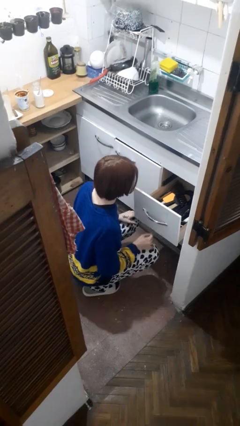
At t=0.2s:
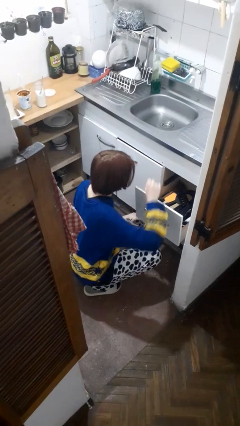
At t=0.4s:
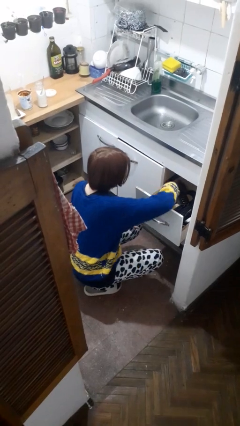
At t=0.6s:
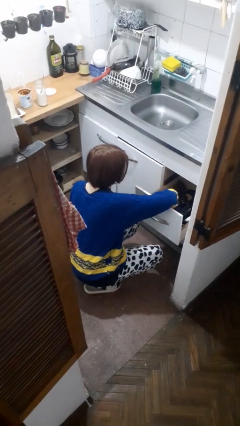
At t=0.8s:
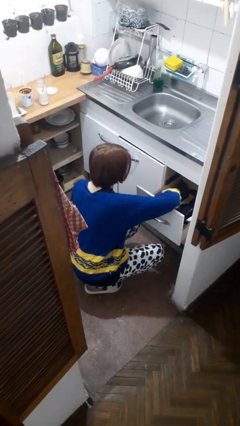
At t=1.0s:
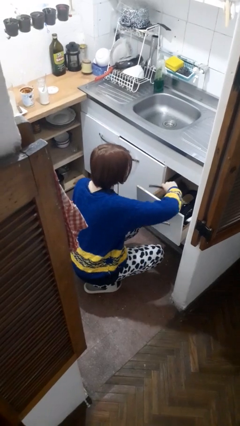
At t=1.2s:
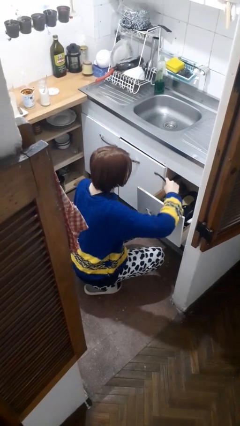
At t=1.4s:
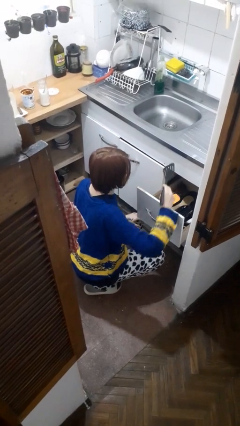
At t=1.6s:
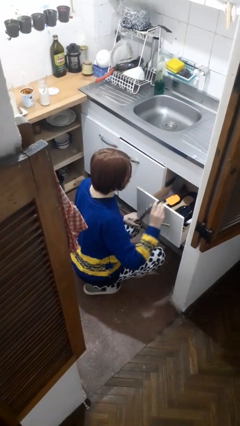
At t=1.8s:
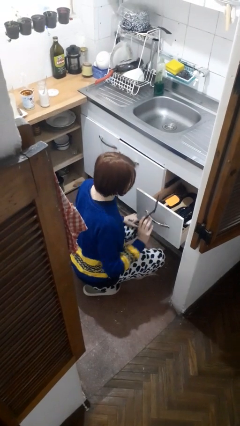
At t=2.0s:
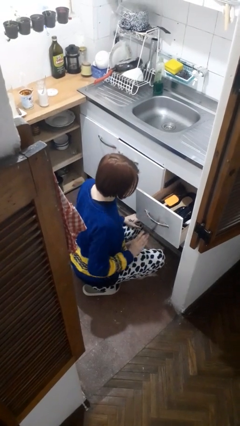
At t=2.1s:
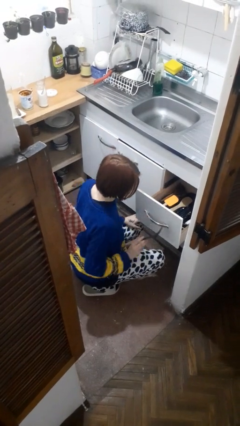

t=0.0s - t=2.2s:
person takes object from kitchen drawer

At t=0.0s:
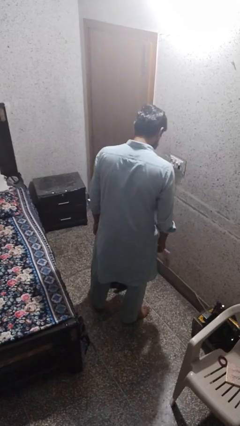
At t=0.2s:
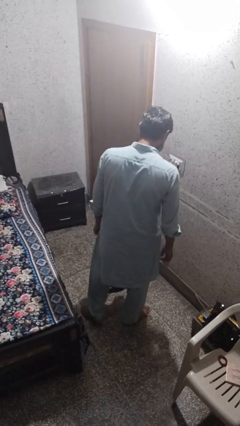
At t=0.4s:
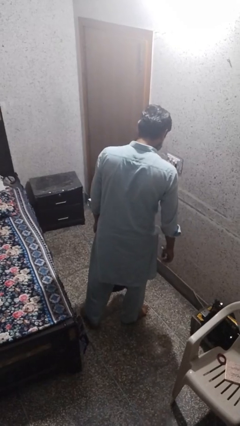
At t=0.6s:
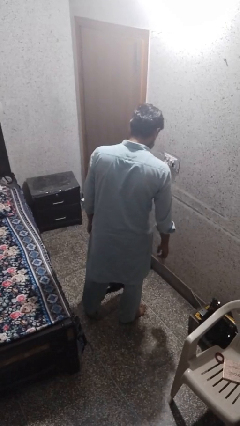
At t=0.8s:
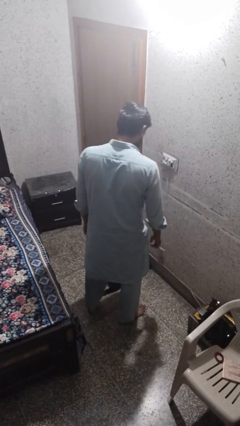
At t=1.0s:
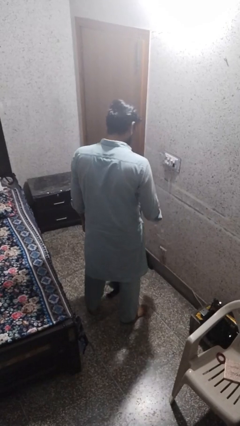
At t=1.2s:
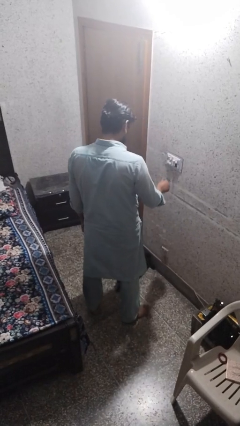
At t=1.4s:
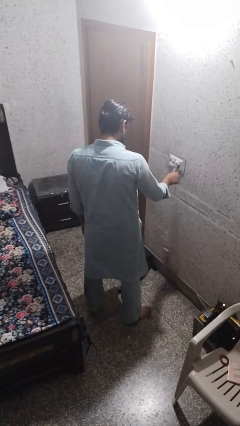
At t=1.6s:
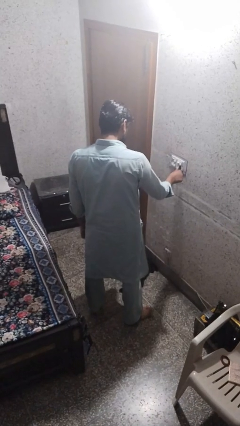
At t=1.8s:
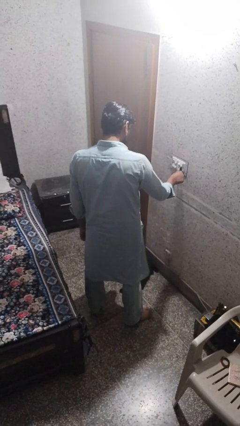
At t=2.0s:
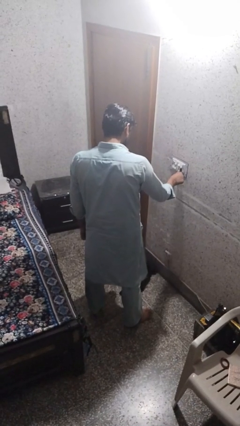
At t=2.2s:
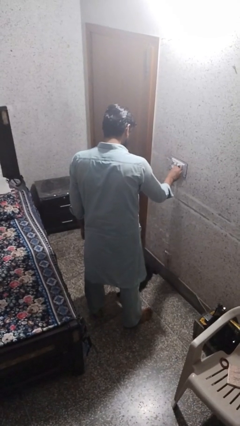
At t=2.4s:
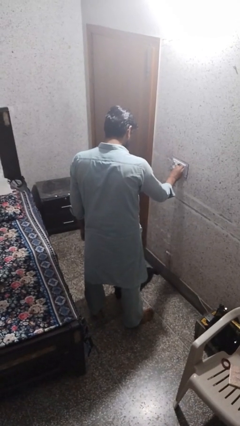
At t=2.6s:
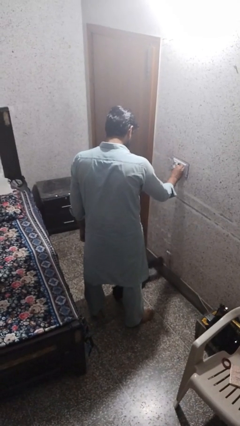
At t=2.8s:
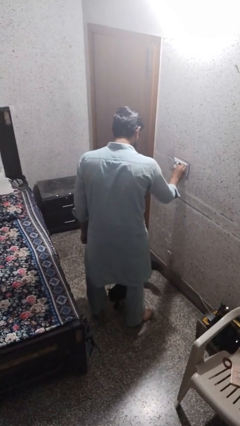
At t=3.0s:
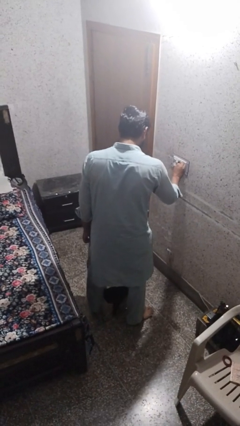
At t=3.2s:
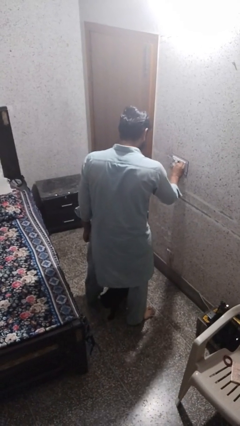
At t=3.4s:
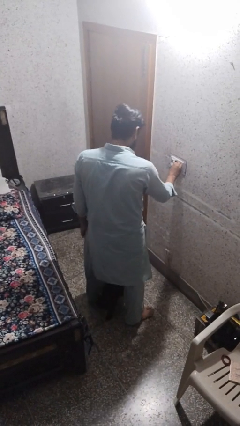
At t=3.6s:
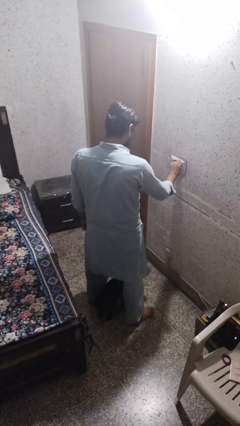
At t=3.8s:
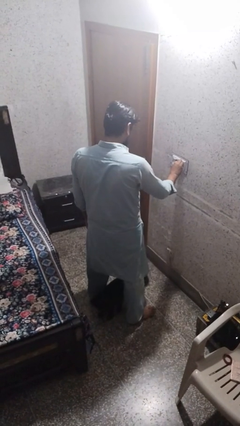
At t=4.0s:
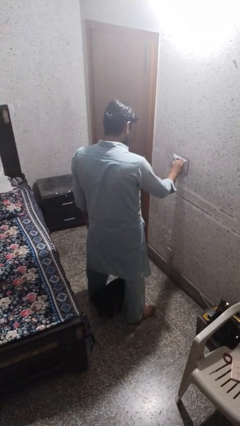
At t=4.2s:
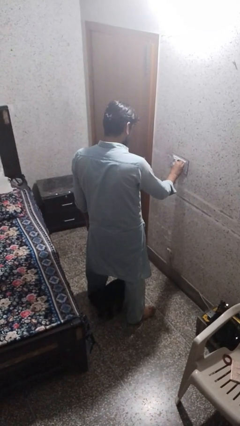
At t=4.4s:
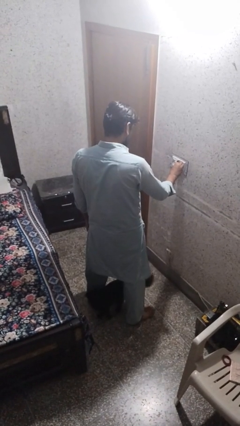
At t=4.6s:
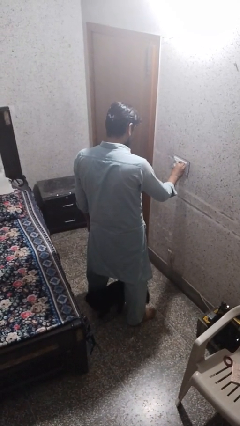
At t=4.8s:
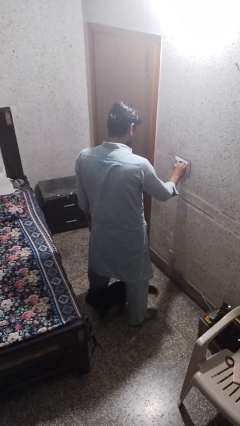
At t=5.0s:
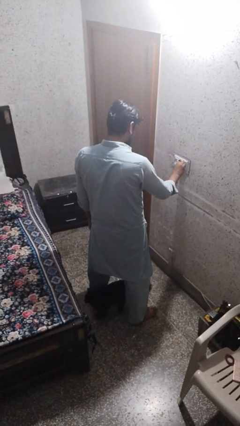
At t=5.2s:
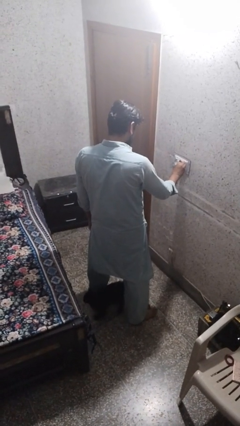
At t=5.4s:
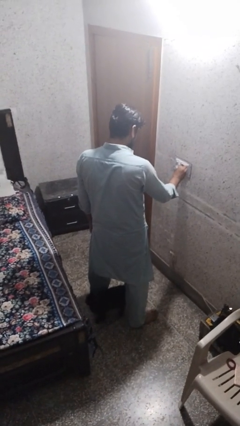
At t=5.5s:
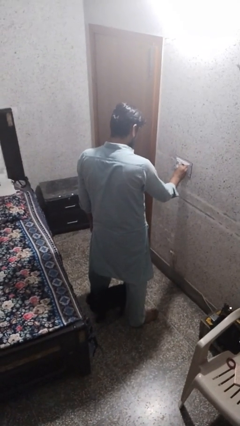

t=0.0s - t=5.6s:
person turns on fan

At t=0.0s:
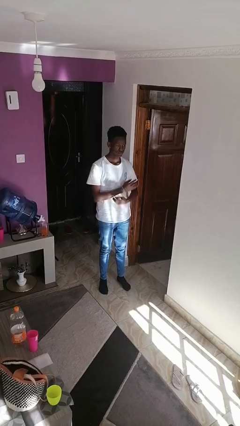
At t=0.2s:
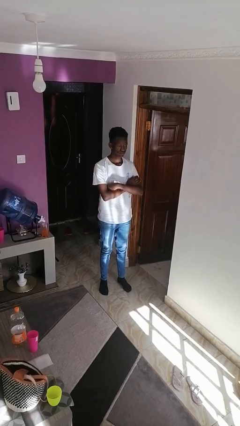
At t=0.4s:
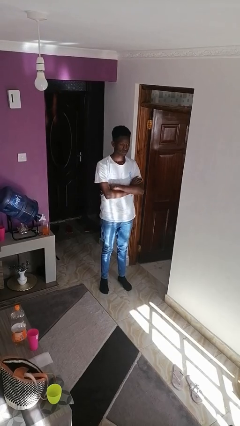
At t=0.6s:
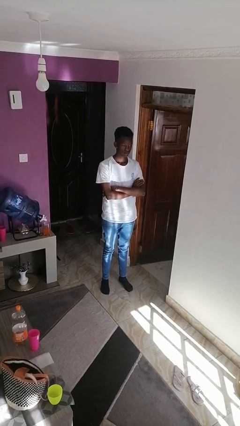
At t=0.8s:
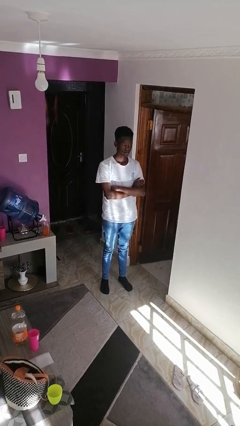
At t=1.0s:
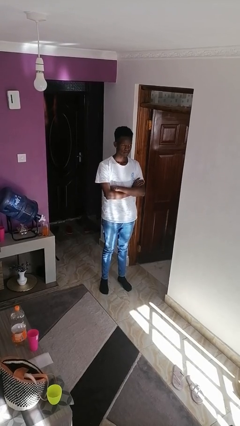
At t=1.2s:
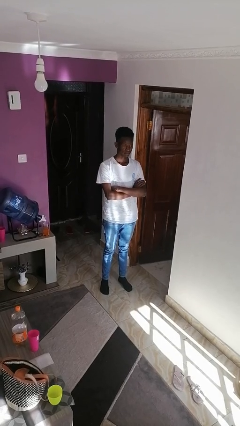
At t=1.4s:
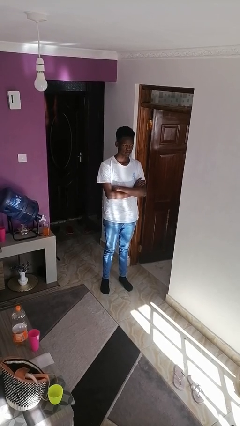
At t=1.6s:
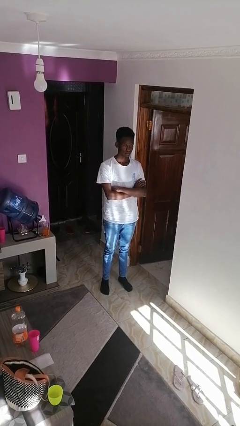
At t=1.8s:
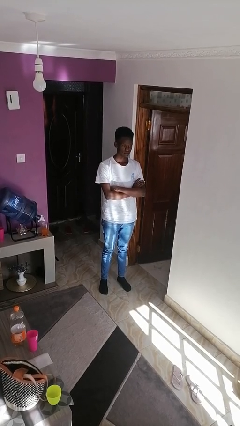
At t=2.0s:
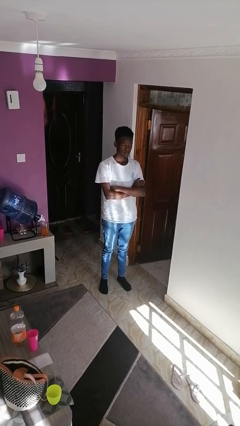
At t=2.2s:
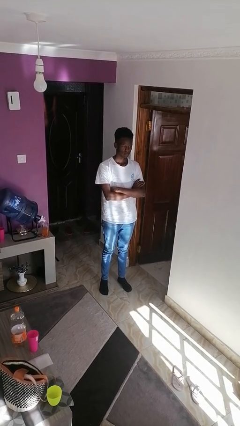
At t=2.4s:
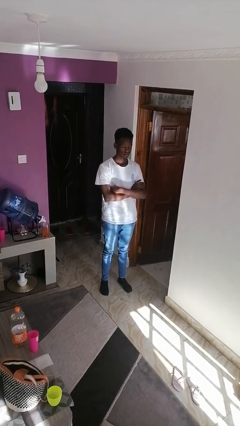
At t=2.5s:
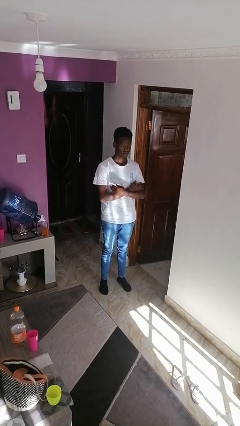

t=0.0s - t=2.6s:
person crosses arms

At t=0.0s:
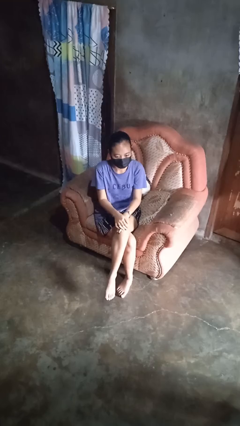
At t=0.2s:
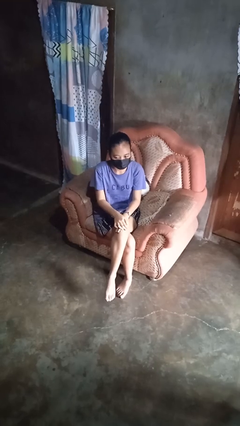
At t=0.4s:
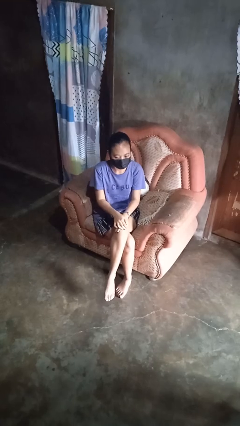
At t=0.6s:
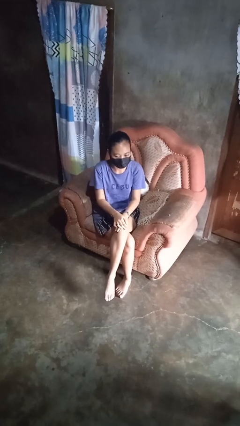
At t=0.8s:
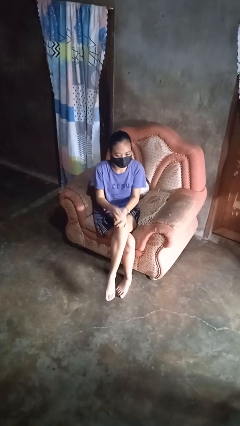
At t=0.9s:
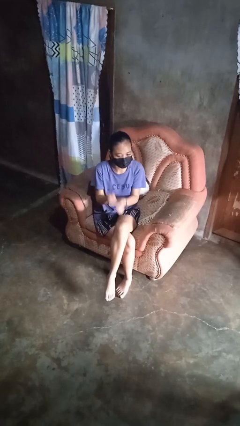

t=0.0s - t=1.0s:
person takes off earrings

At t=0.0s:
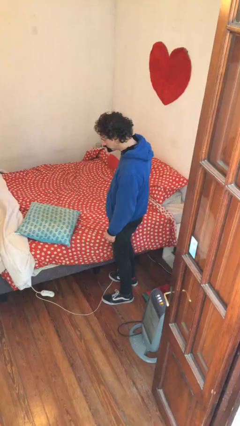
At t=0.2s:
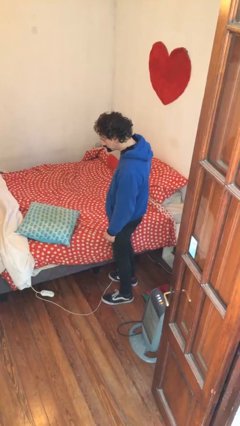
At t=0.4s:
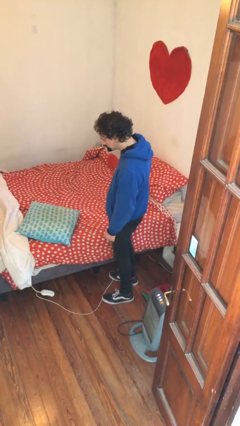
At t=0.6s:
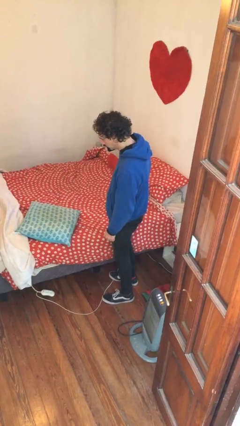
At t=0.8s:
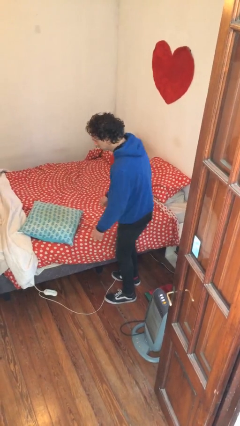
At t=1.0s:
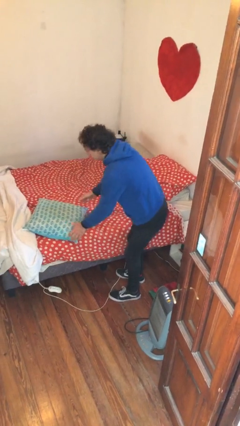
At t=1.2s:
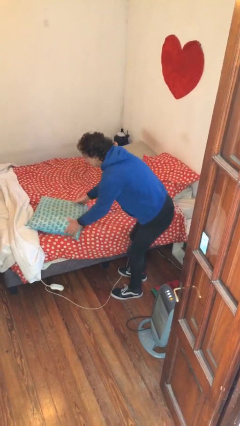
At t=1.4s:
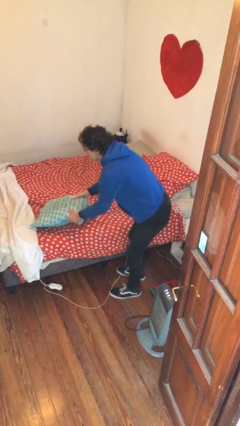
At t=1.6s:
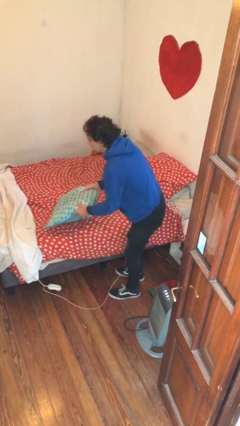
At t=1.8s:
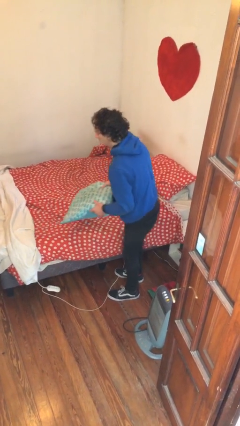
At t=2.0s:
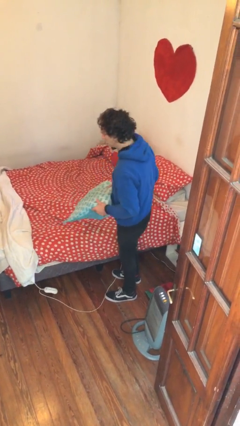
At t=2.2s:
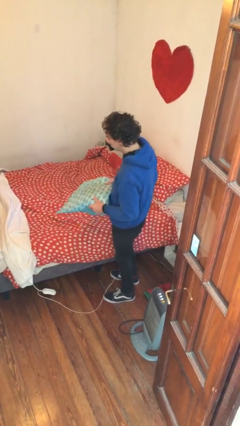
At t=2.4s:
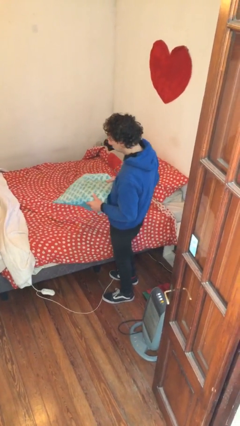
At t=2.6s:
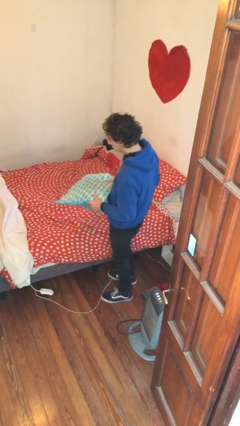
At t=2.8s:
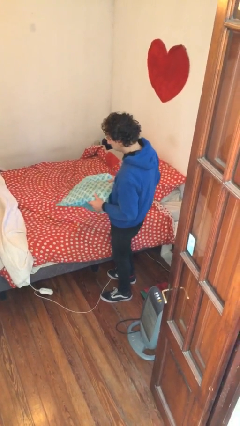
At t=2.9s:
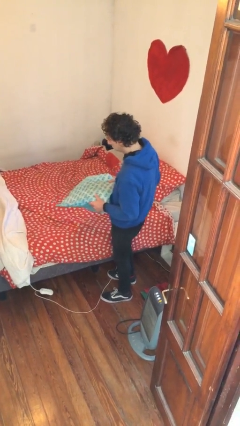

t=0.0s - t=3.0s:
person picks up object from bed

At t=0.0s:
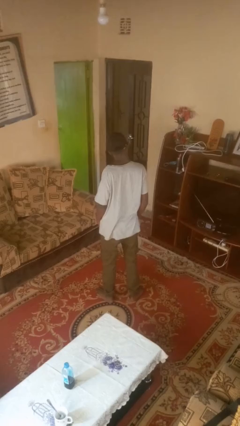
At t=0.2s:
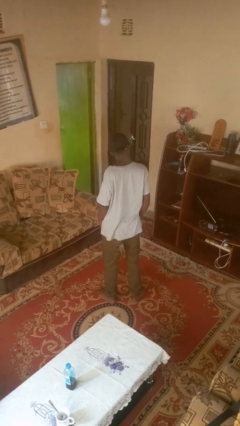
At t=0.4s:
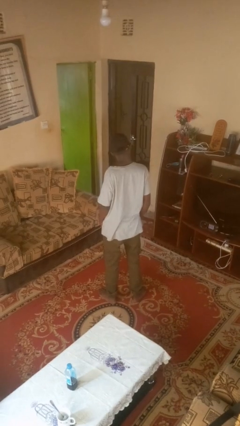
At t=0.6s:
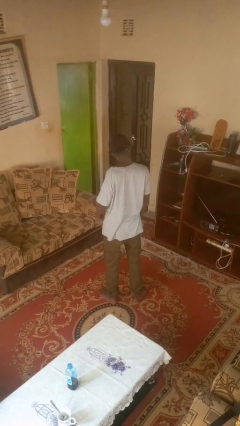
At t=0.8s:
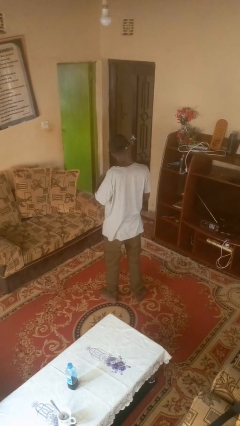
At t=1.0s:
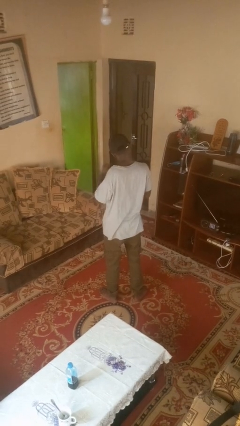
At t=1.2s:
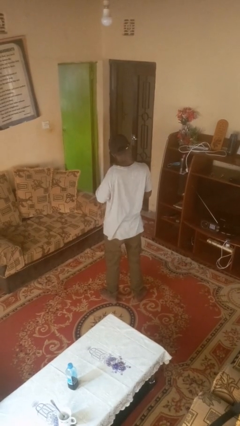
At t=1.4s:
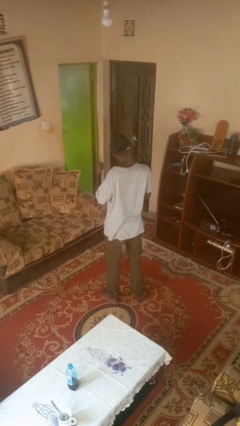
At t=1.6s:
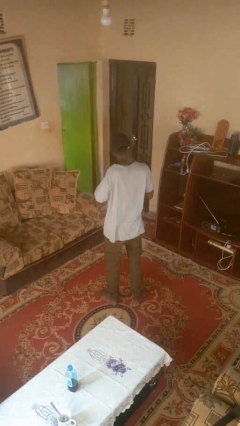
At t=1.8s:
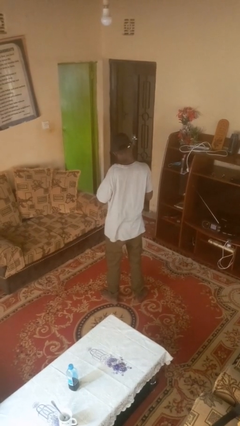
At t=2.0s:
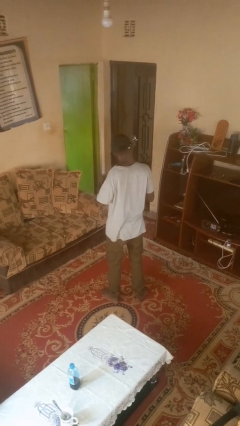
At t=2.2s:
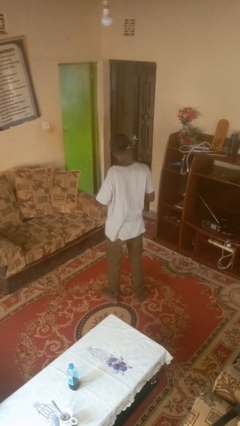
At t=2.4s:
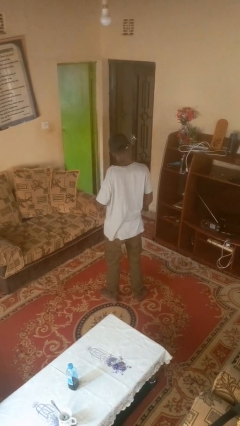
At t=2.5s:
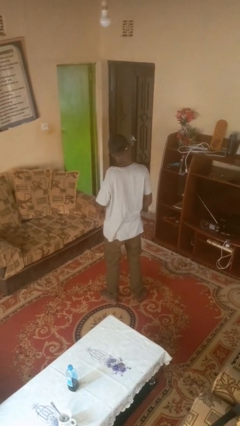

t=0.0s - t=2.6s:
person drums on chest

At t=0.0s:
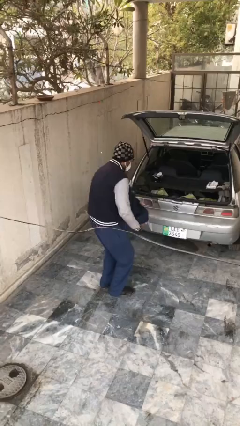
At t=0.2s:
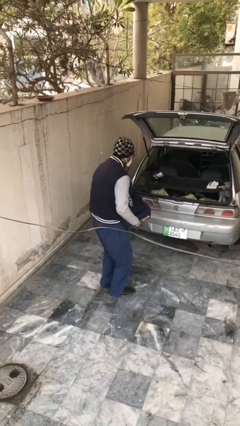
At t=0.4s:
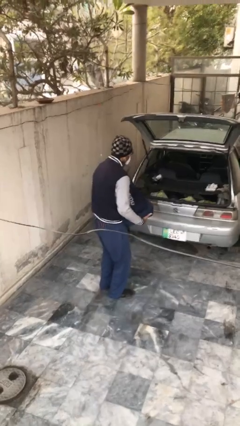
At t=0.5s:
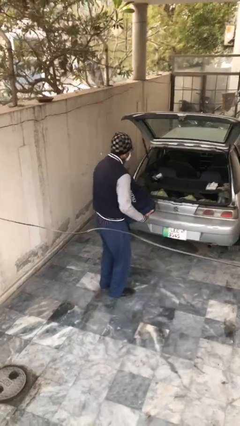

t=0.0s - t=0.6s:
person loads car
